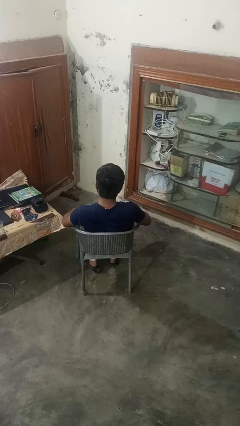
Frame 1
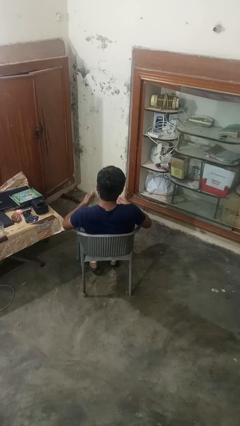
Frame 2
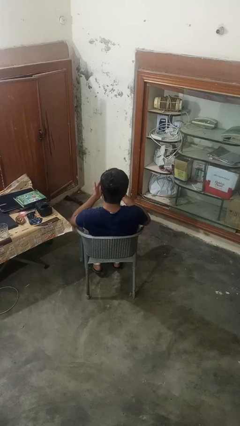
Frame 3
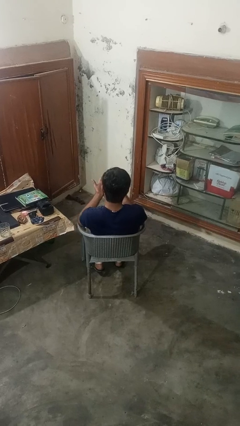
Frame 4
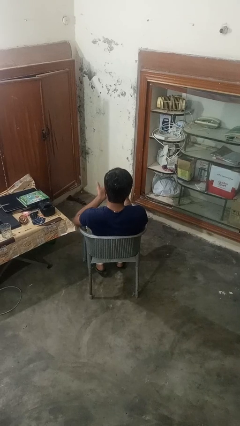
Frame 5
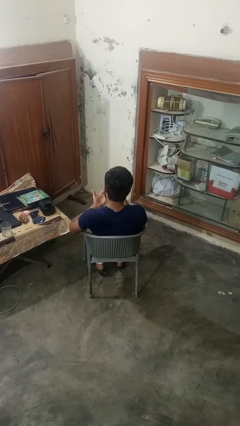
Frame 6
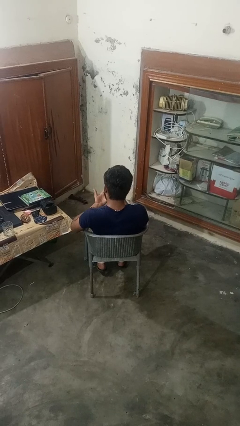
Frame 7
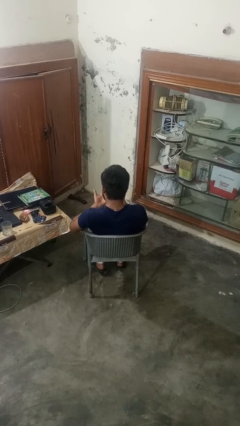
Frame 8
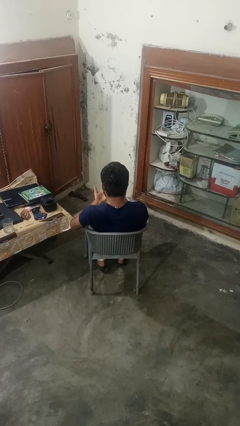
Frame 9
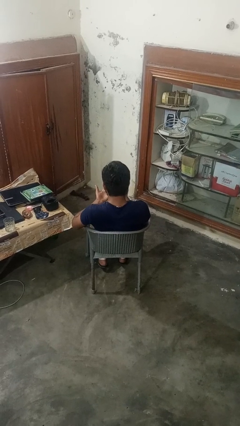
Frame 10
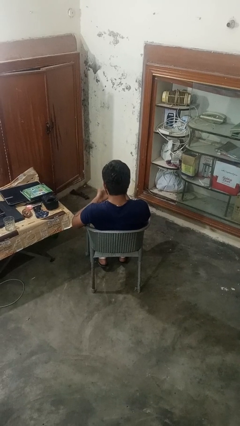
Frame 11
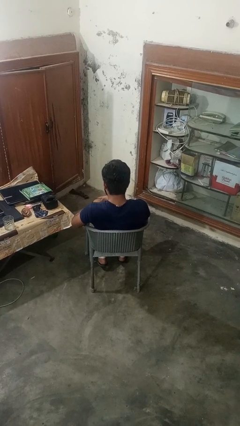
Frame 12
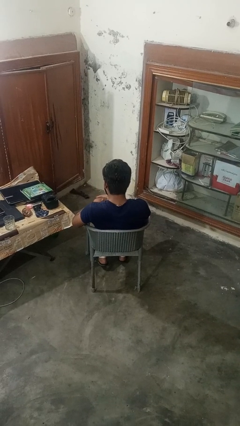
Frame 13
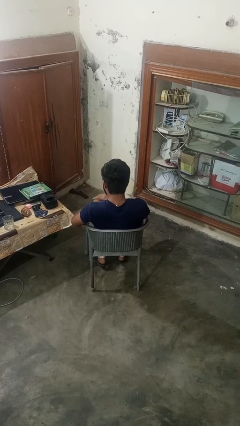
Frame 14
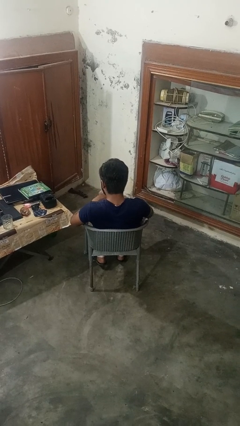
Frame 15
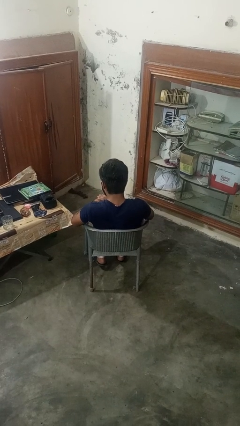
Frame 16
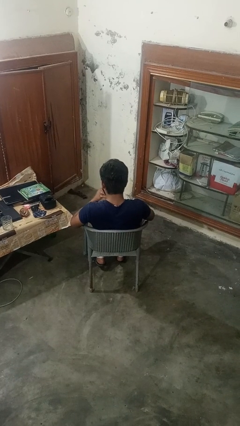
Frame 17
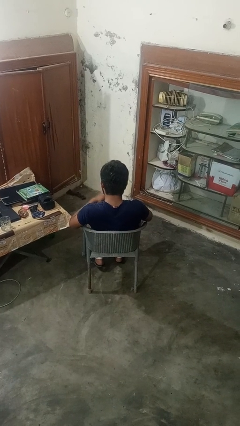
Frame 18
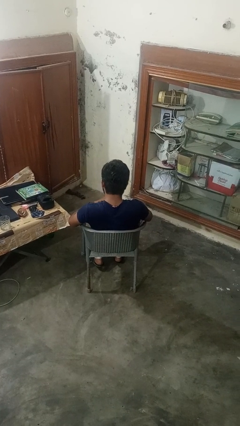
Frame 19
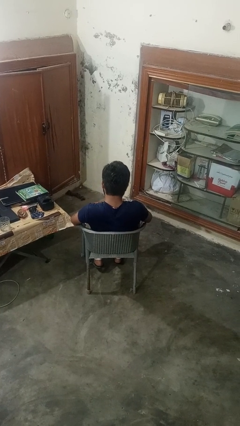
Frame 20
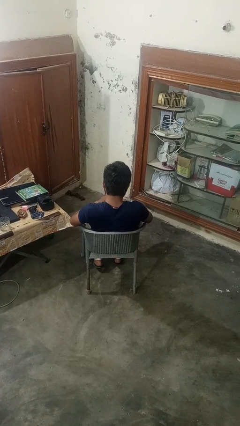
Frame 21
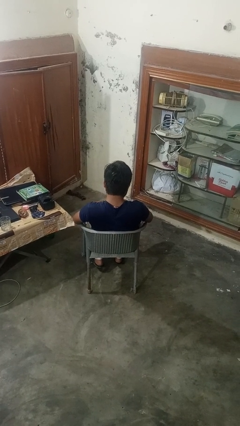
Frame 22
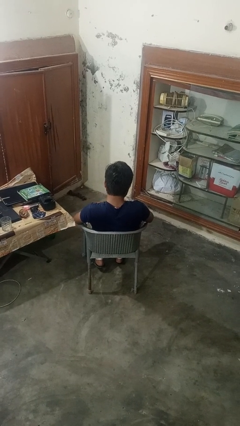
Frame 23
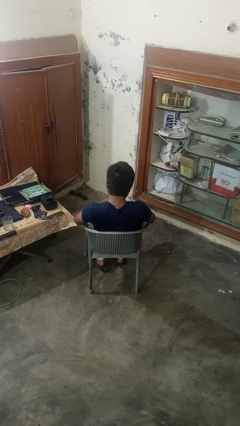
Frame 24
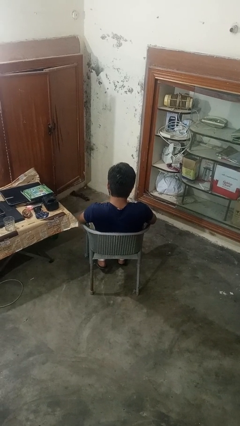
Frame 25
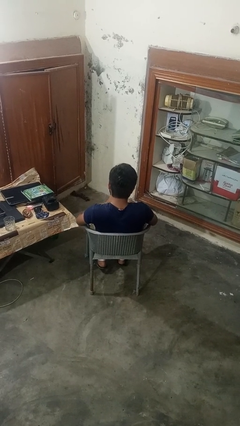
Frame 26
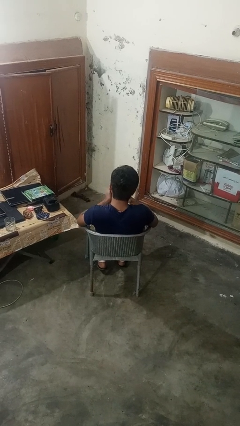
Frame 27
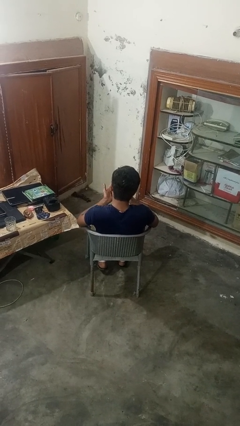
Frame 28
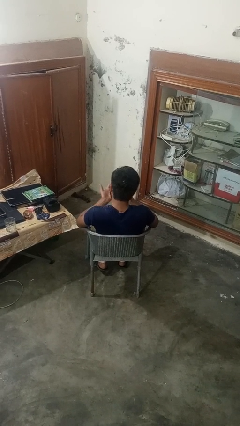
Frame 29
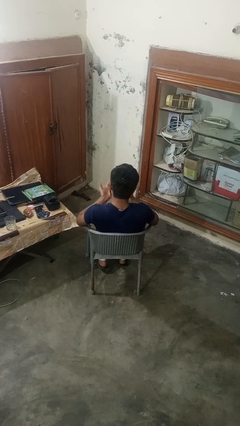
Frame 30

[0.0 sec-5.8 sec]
person looks at hands in lap

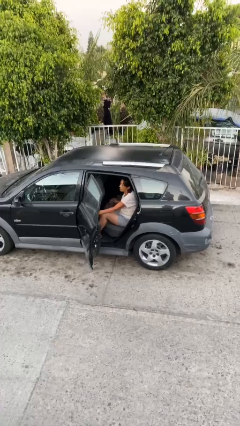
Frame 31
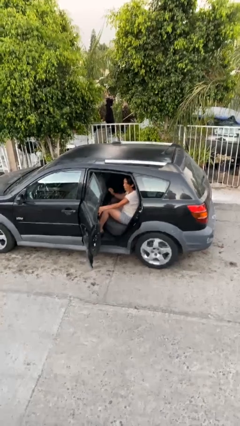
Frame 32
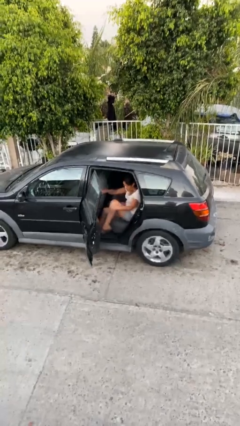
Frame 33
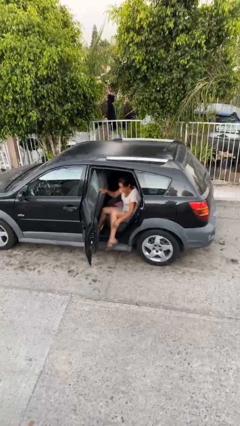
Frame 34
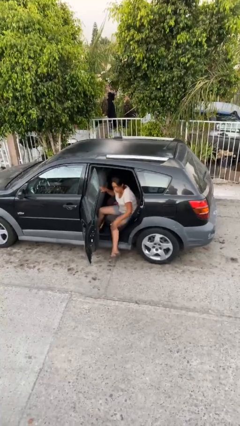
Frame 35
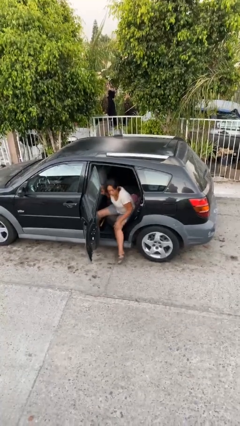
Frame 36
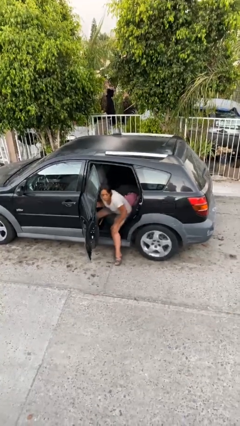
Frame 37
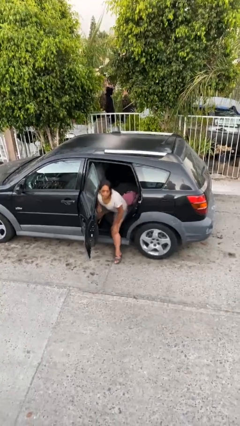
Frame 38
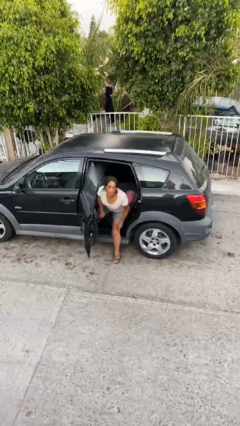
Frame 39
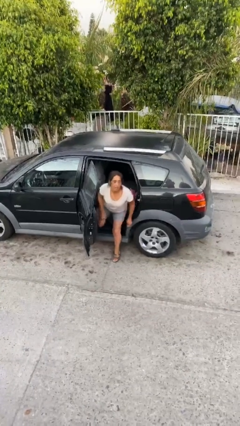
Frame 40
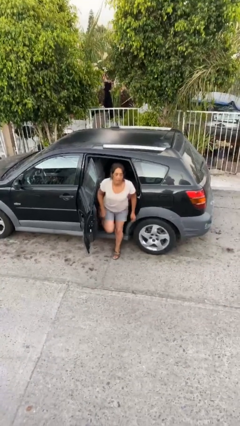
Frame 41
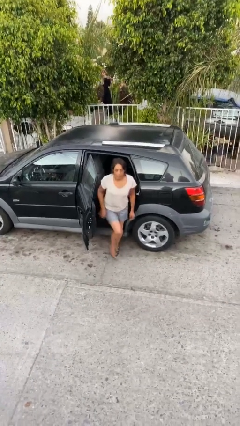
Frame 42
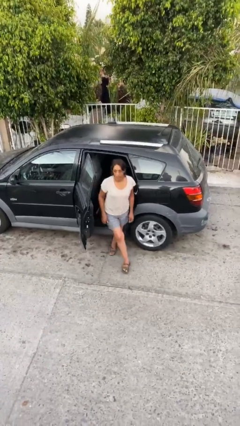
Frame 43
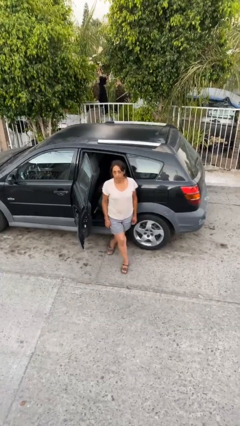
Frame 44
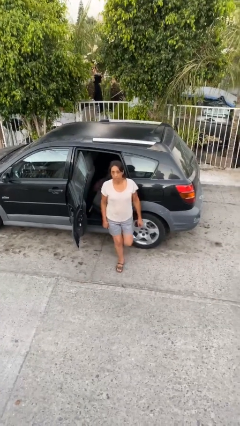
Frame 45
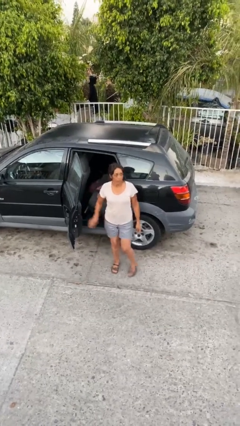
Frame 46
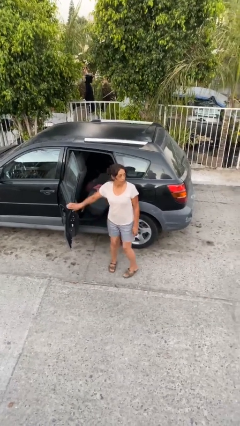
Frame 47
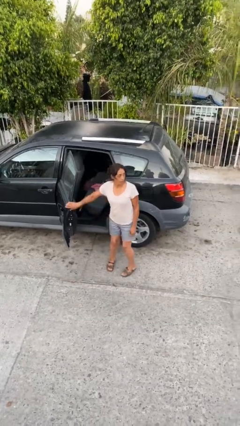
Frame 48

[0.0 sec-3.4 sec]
person exits car

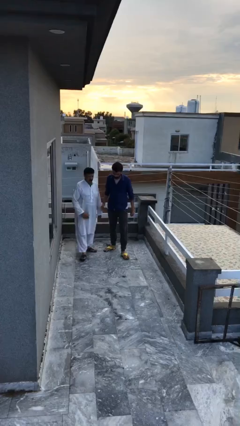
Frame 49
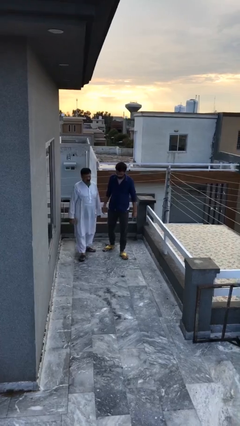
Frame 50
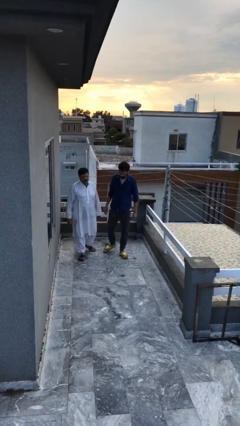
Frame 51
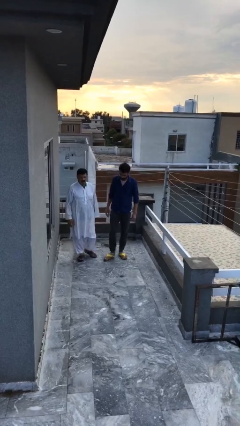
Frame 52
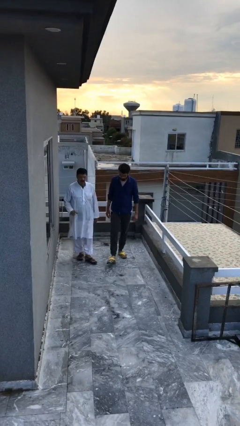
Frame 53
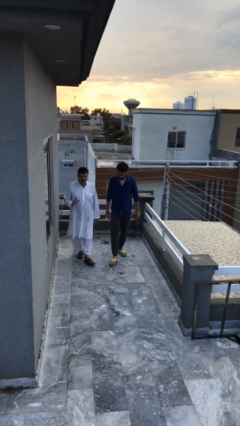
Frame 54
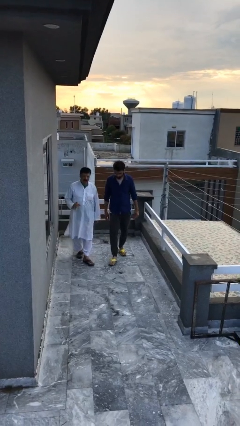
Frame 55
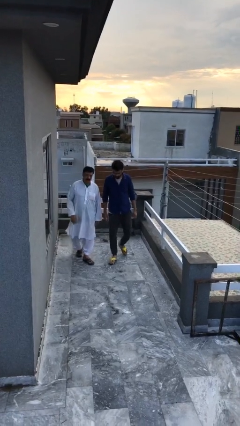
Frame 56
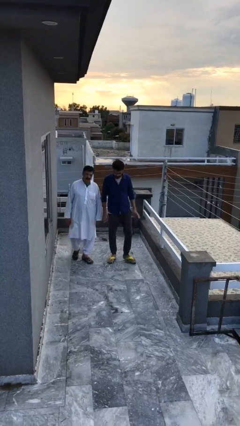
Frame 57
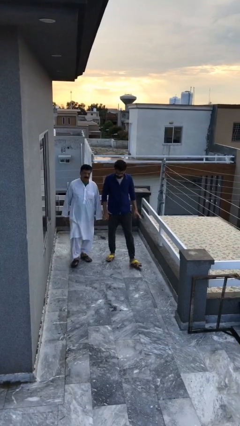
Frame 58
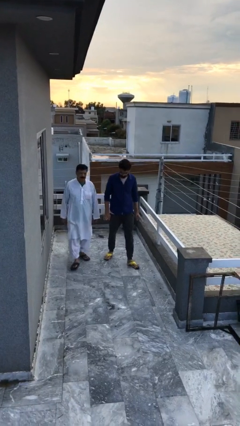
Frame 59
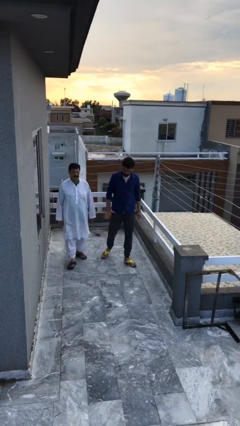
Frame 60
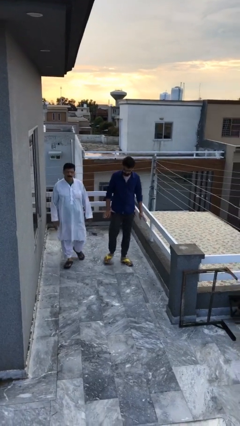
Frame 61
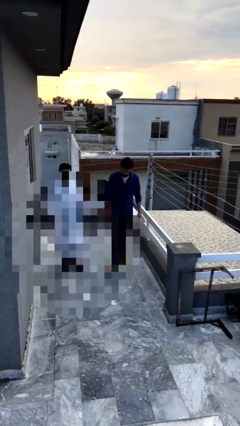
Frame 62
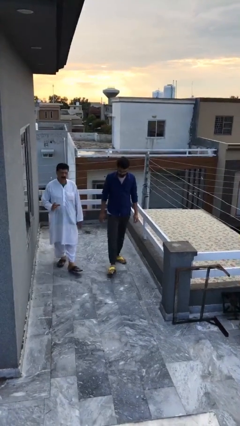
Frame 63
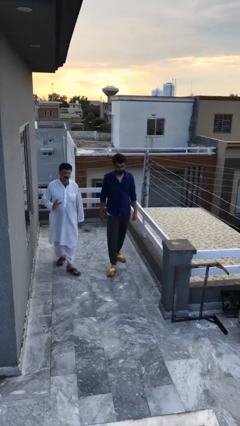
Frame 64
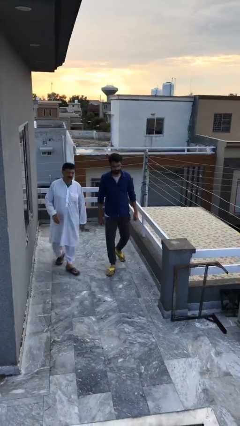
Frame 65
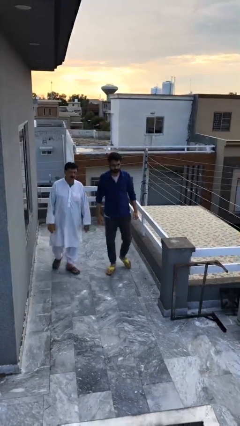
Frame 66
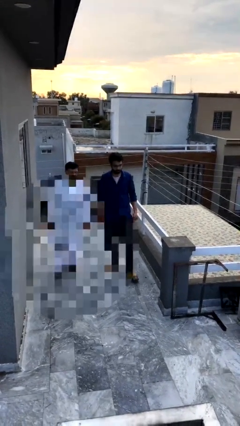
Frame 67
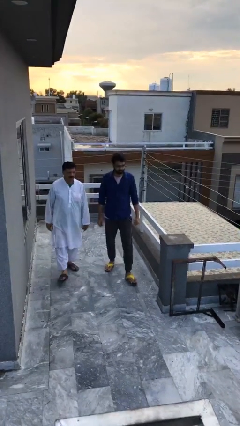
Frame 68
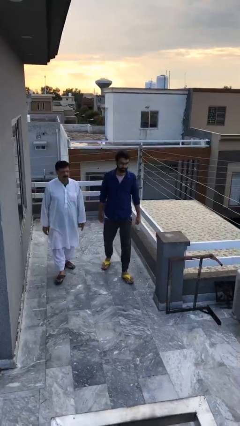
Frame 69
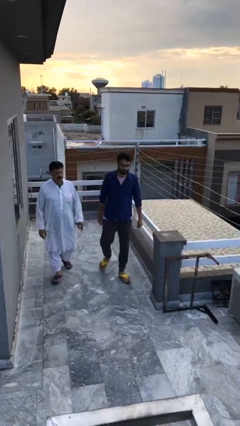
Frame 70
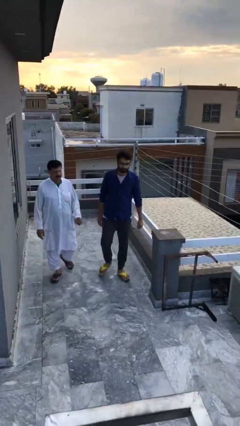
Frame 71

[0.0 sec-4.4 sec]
person talks to person

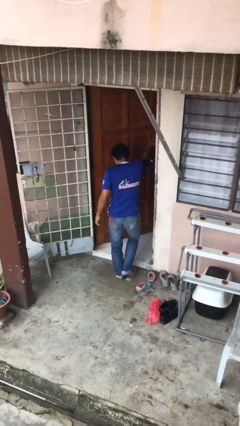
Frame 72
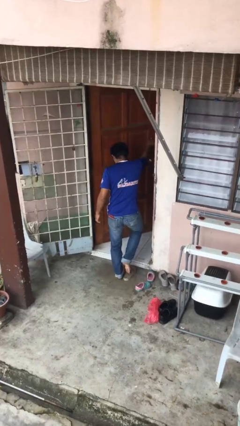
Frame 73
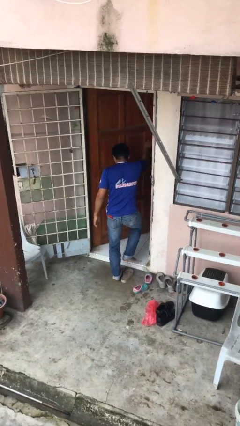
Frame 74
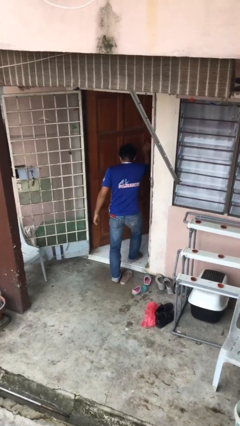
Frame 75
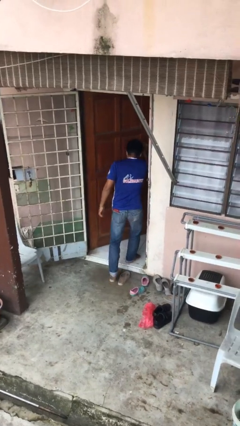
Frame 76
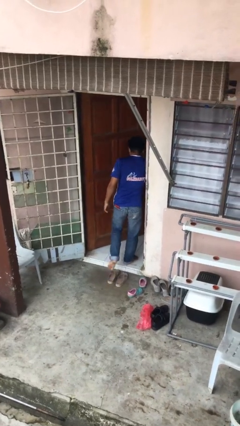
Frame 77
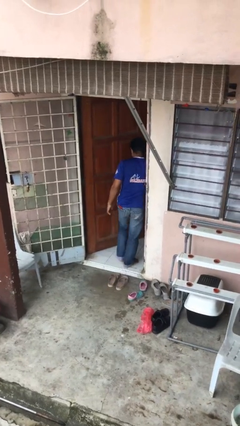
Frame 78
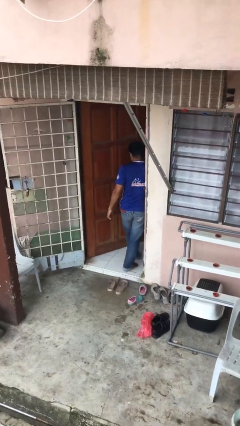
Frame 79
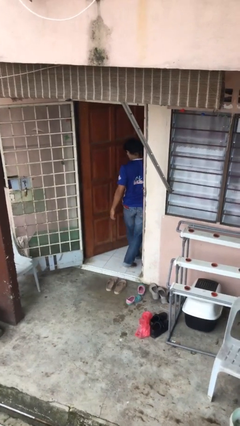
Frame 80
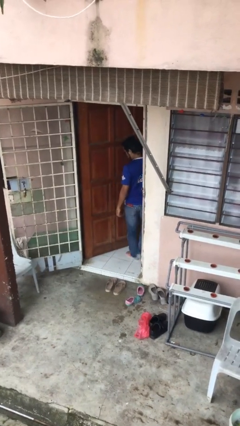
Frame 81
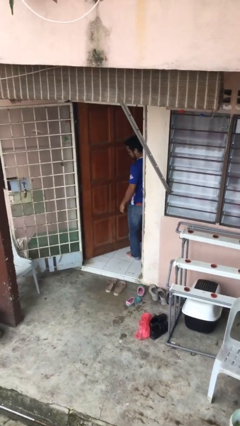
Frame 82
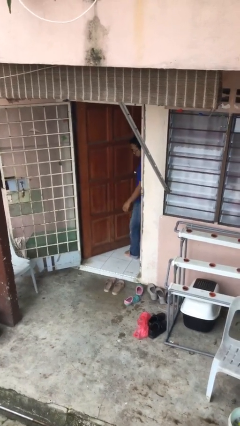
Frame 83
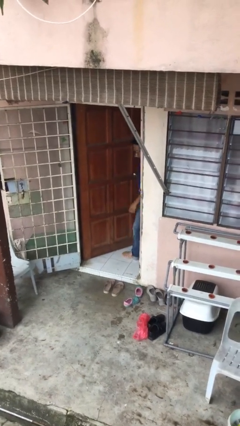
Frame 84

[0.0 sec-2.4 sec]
person exits scene through structure

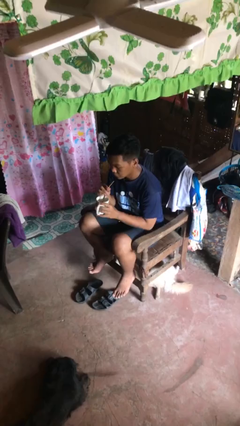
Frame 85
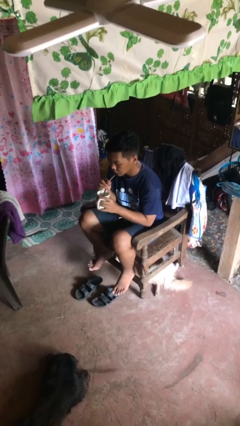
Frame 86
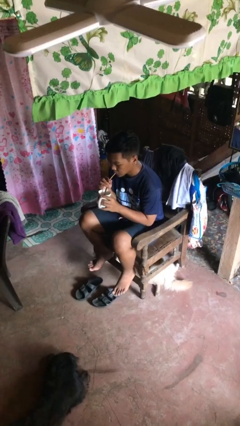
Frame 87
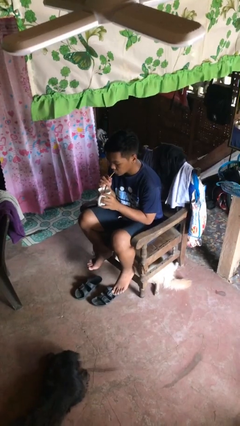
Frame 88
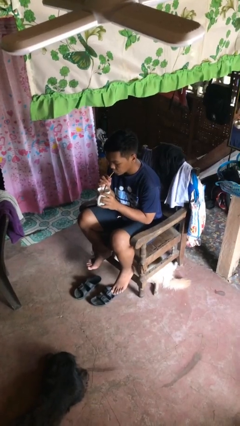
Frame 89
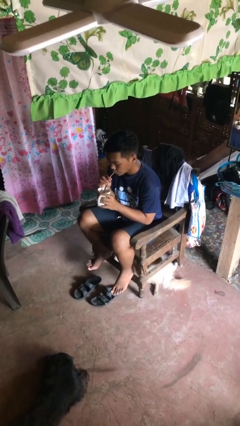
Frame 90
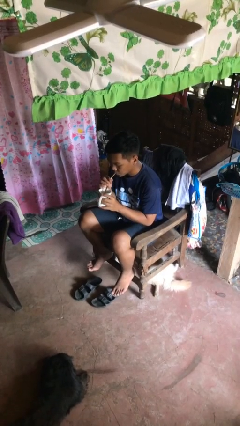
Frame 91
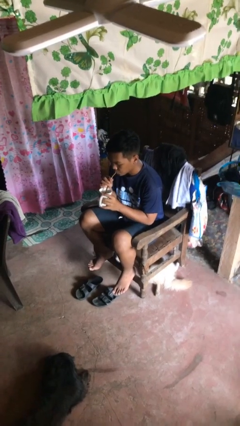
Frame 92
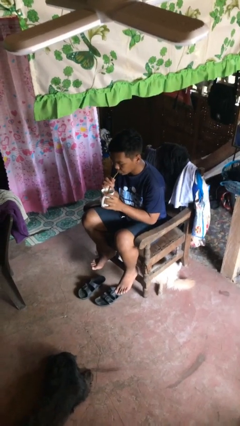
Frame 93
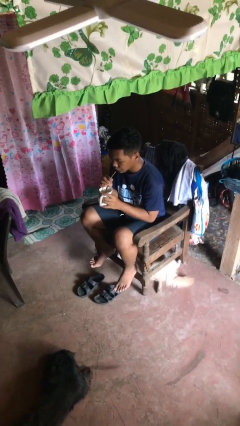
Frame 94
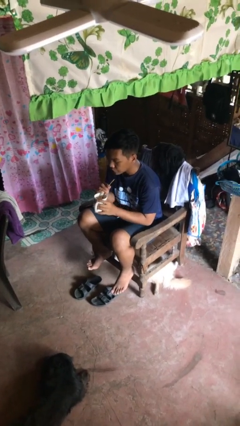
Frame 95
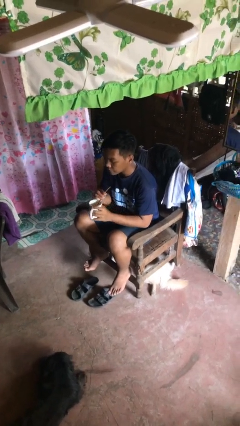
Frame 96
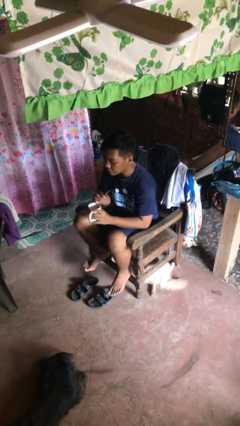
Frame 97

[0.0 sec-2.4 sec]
person drinks from straw
